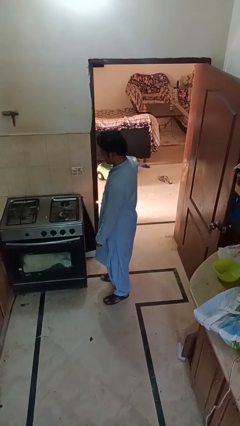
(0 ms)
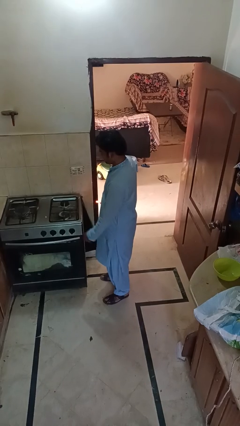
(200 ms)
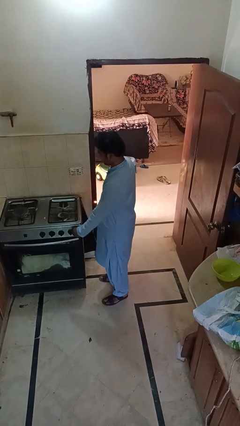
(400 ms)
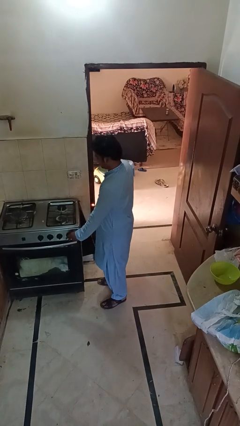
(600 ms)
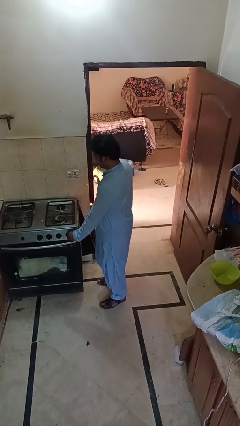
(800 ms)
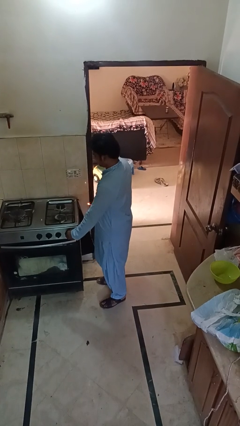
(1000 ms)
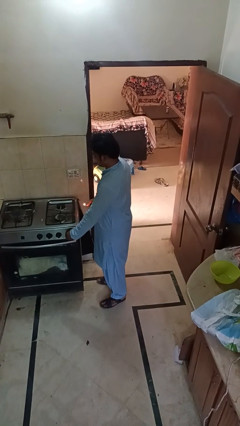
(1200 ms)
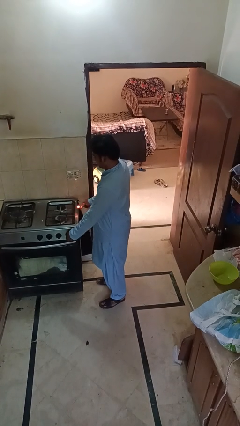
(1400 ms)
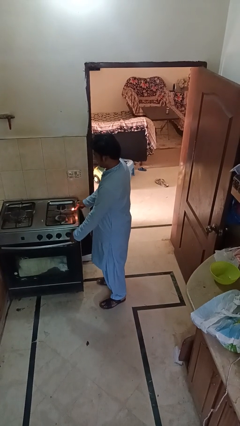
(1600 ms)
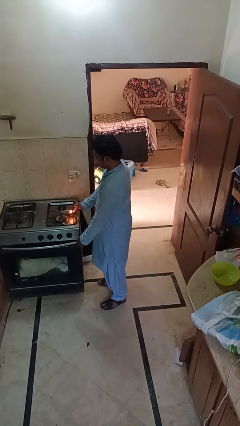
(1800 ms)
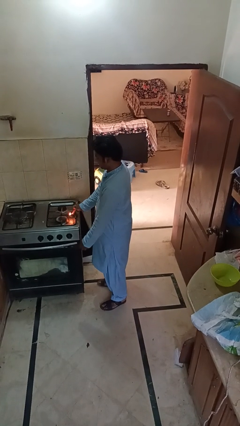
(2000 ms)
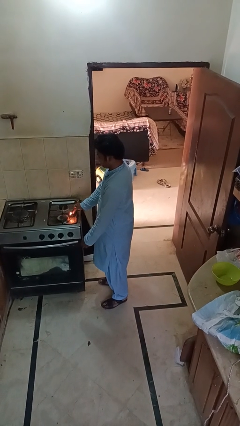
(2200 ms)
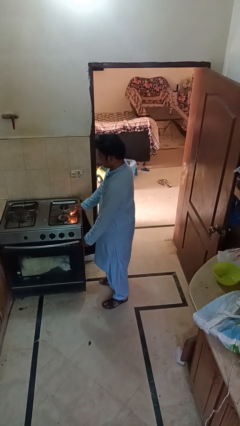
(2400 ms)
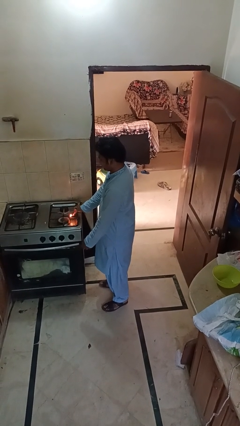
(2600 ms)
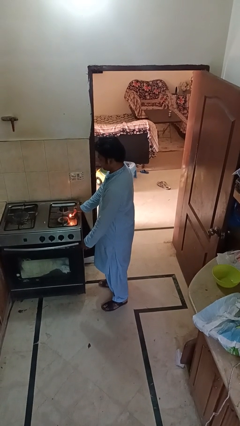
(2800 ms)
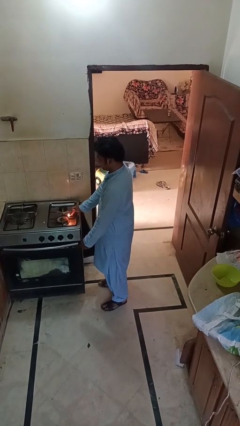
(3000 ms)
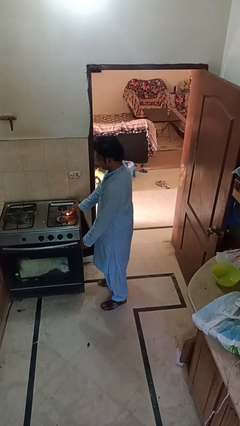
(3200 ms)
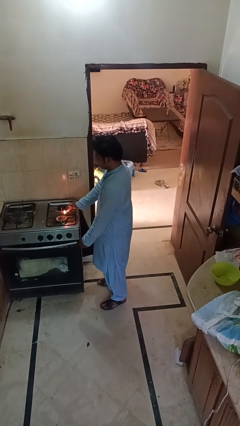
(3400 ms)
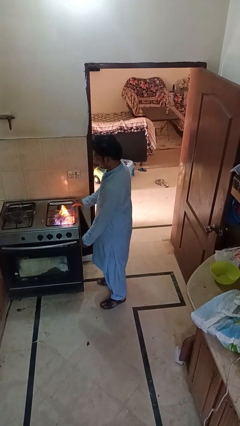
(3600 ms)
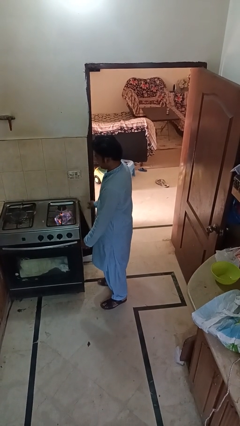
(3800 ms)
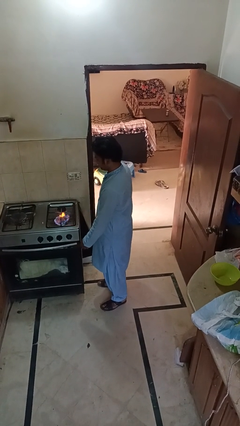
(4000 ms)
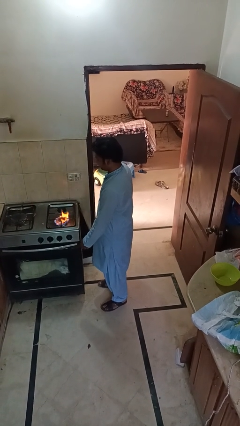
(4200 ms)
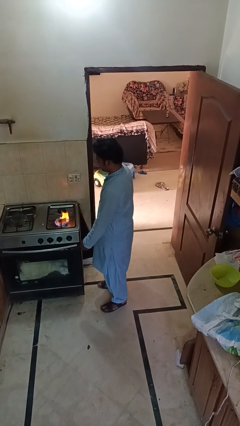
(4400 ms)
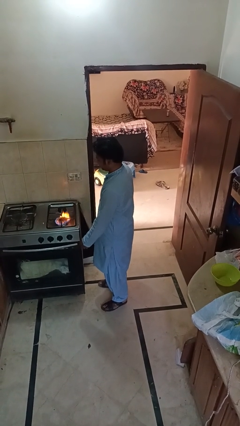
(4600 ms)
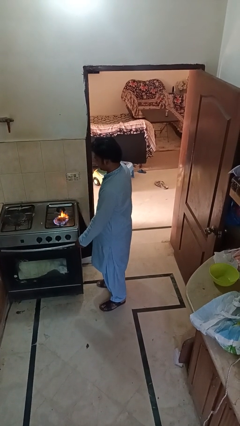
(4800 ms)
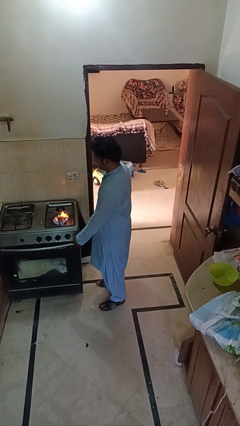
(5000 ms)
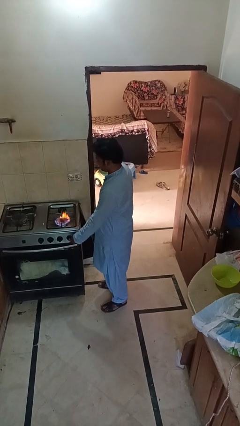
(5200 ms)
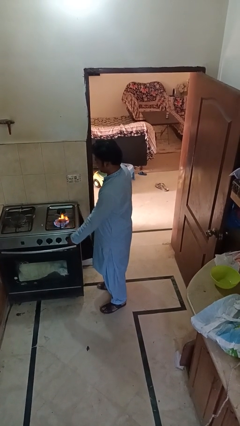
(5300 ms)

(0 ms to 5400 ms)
person turns on stovetop

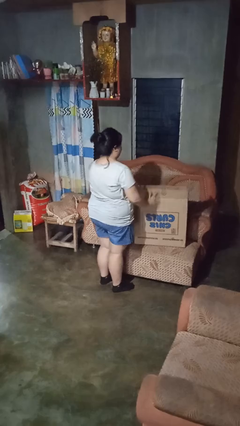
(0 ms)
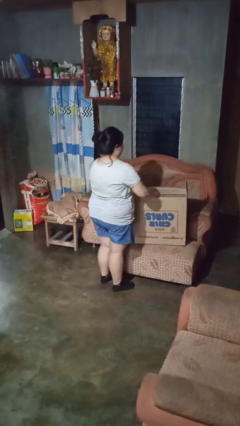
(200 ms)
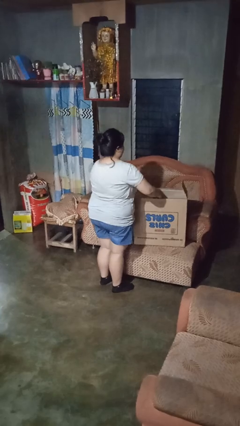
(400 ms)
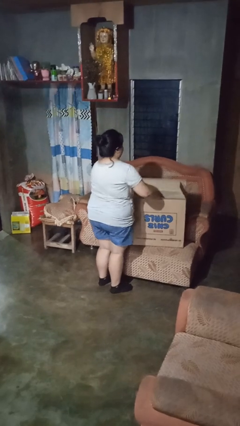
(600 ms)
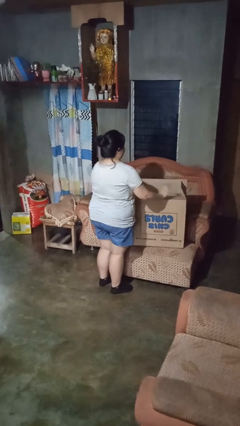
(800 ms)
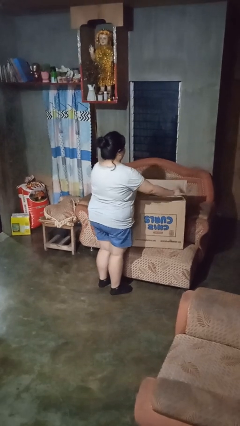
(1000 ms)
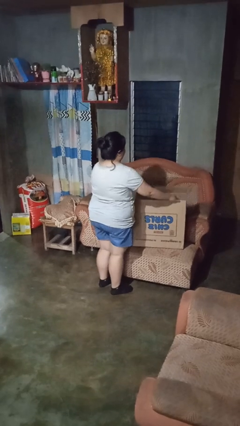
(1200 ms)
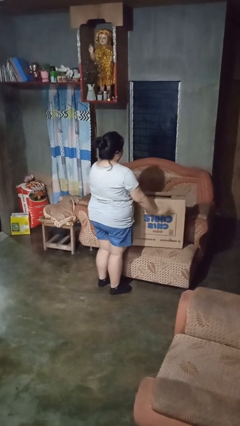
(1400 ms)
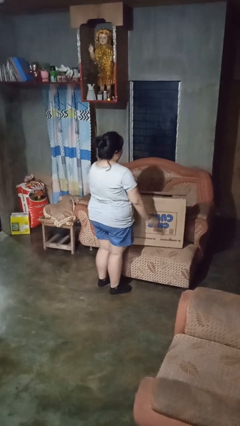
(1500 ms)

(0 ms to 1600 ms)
person closes box

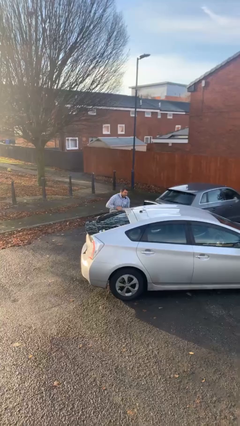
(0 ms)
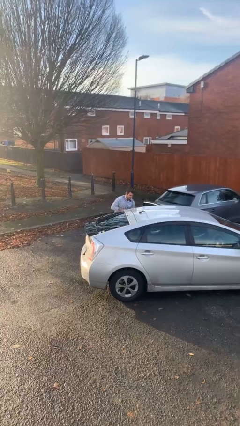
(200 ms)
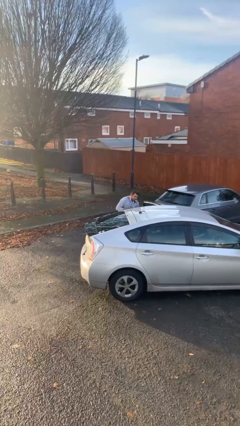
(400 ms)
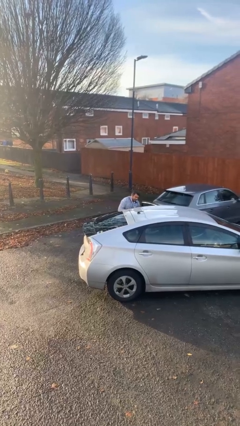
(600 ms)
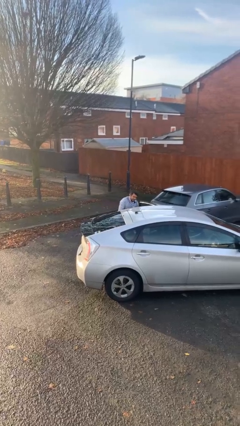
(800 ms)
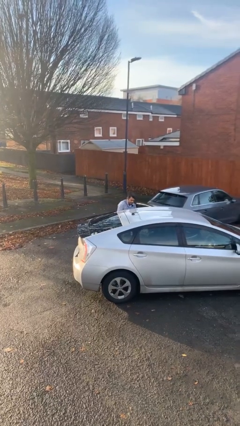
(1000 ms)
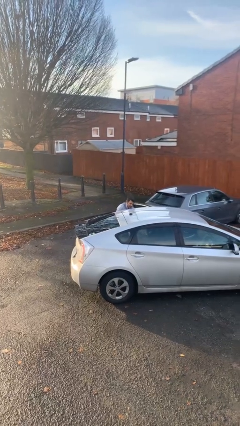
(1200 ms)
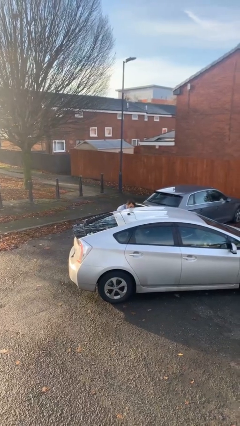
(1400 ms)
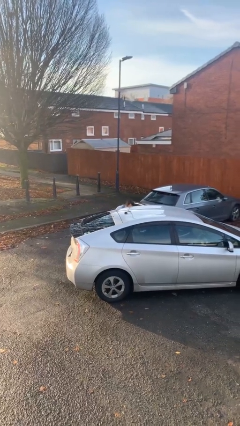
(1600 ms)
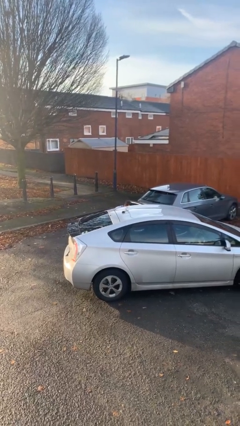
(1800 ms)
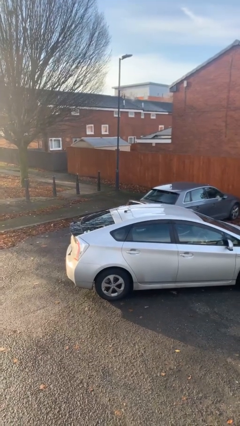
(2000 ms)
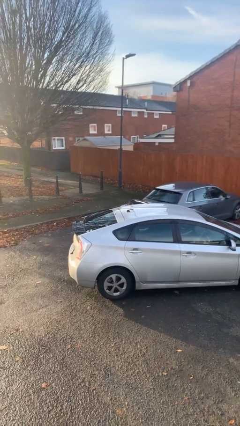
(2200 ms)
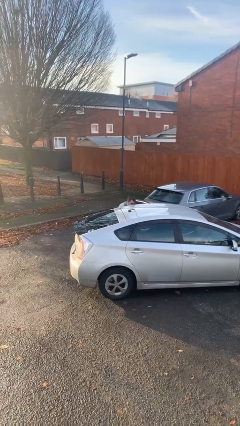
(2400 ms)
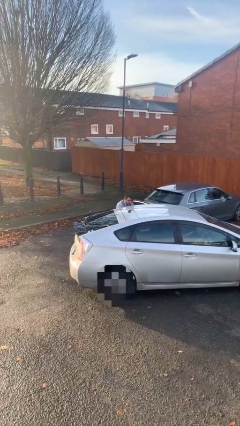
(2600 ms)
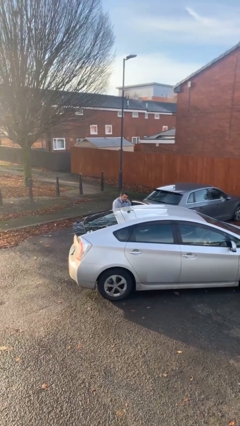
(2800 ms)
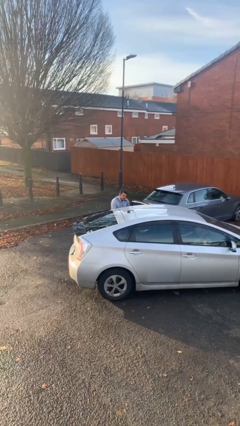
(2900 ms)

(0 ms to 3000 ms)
person loads car

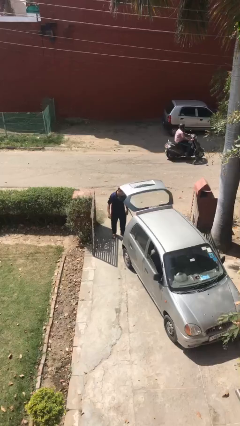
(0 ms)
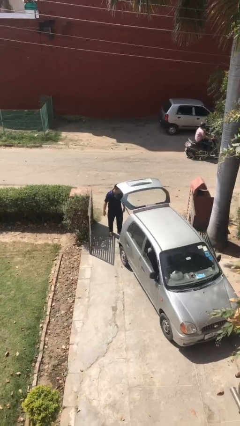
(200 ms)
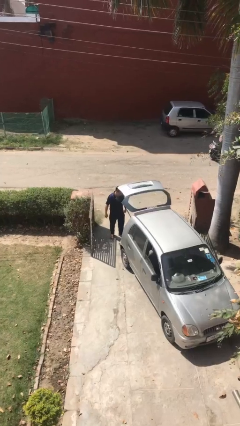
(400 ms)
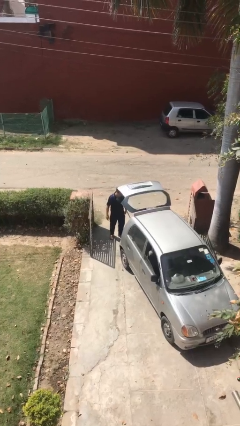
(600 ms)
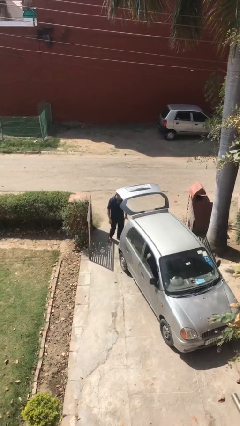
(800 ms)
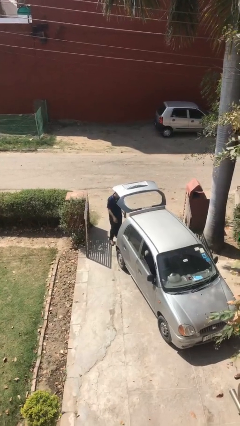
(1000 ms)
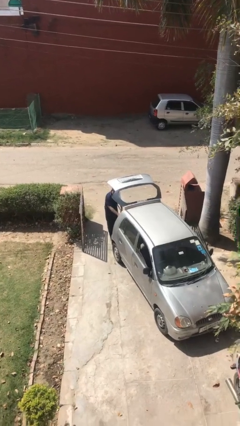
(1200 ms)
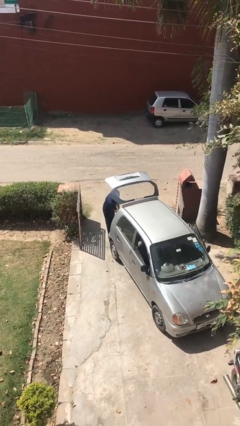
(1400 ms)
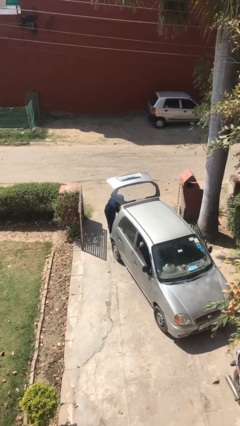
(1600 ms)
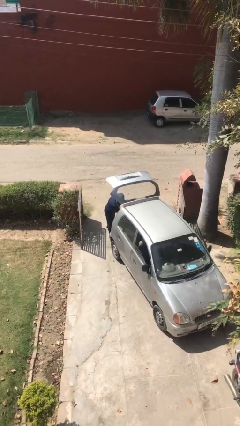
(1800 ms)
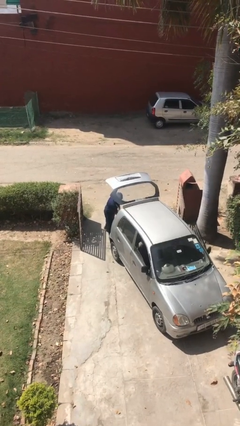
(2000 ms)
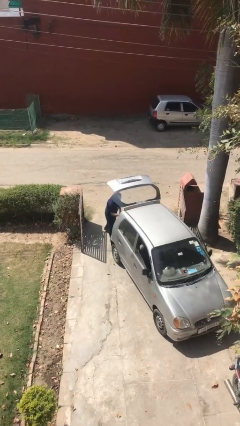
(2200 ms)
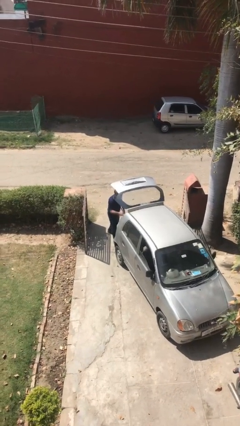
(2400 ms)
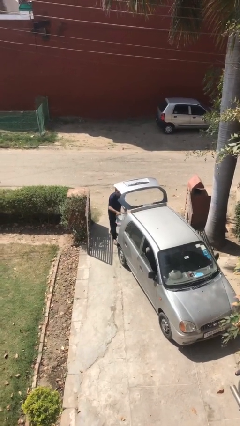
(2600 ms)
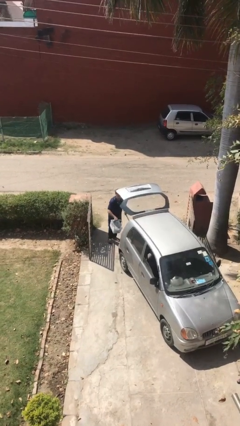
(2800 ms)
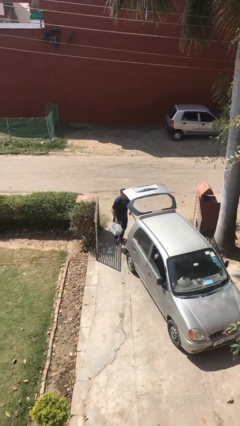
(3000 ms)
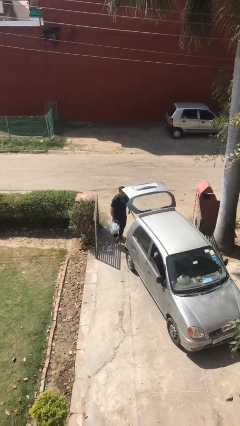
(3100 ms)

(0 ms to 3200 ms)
person unloads car

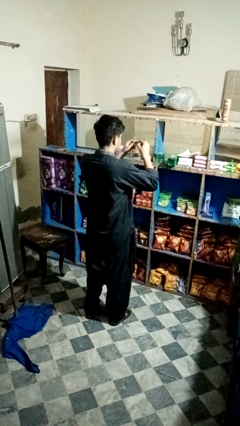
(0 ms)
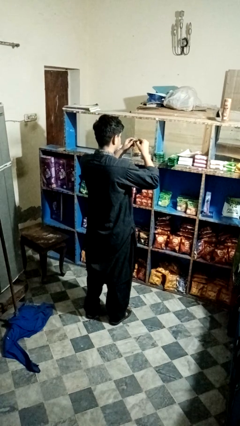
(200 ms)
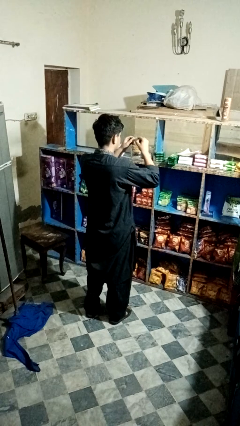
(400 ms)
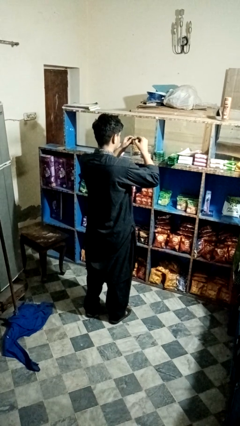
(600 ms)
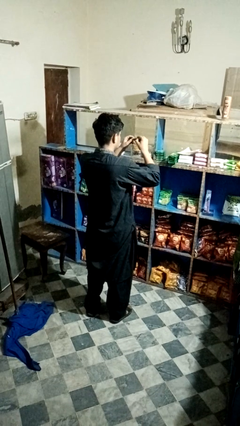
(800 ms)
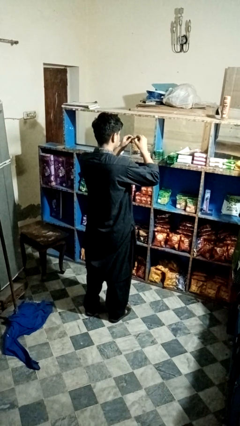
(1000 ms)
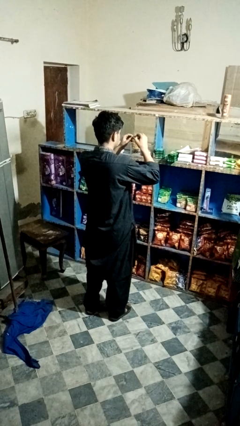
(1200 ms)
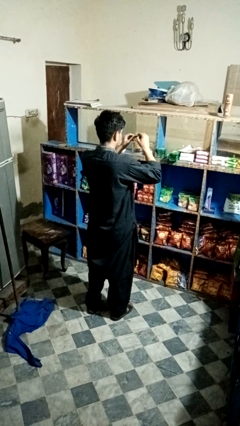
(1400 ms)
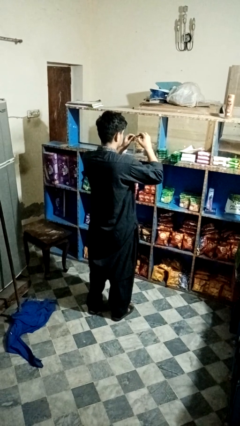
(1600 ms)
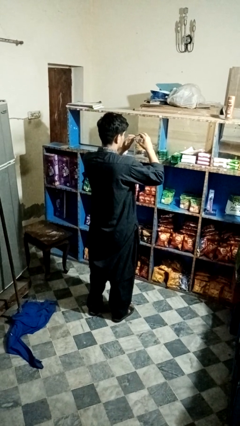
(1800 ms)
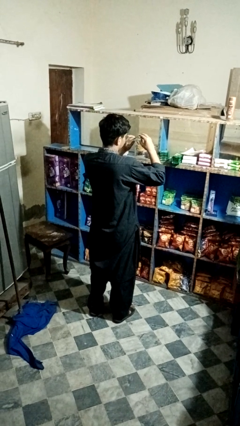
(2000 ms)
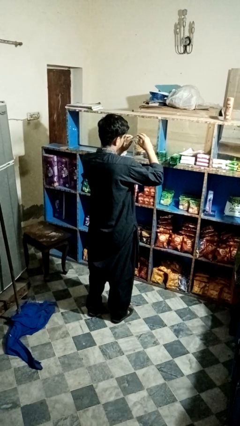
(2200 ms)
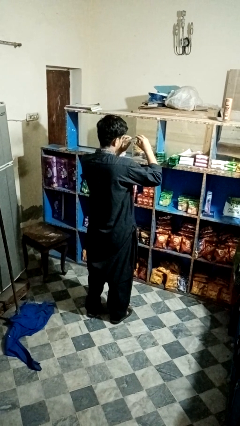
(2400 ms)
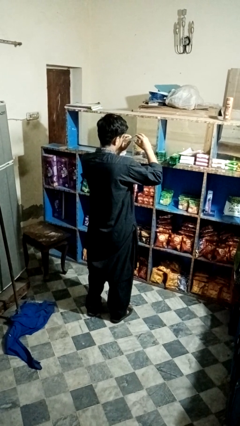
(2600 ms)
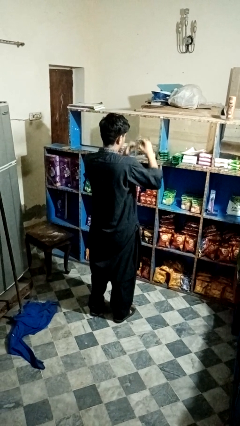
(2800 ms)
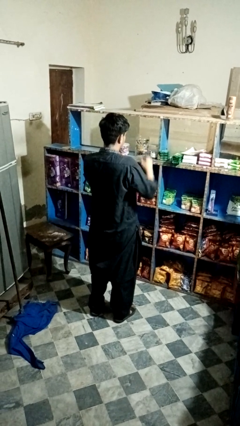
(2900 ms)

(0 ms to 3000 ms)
person clips fingernails

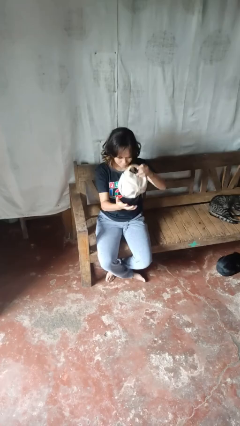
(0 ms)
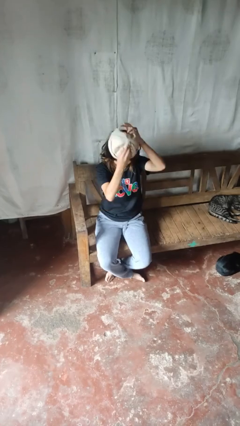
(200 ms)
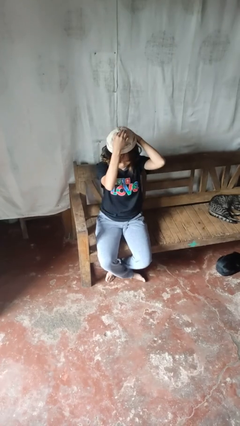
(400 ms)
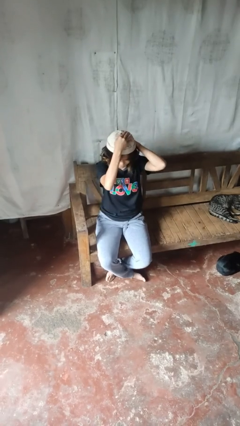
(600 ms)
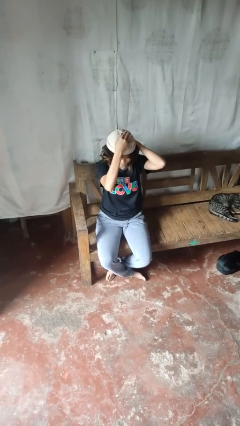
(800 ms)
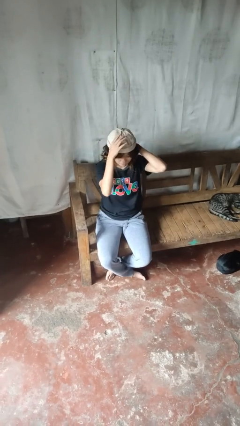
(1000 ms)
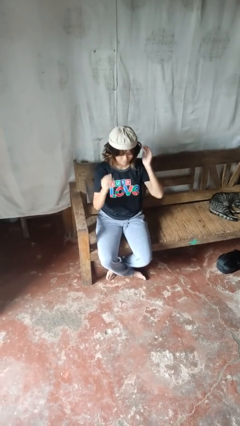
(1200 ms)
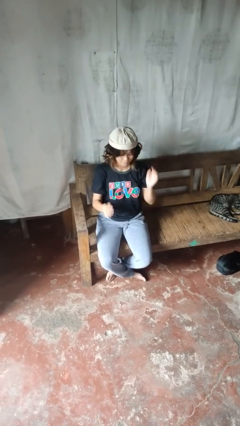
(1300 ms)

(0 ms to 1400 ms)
person puts on hat
